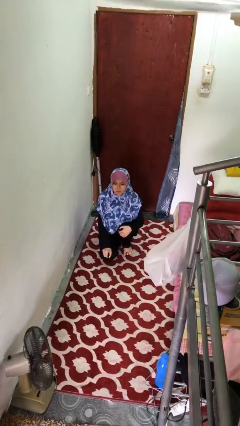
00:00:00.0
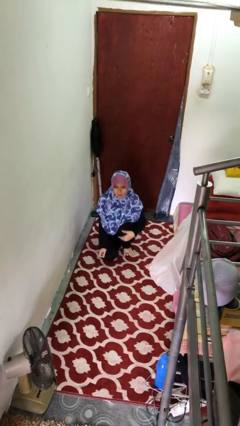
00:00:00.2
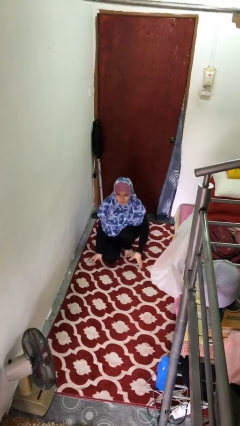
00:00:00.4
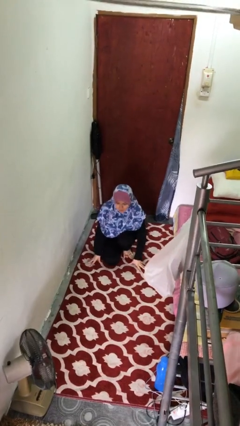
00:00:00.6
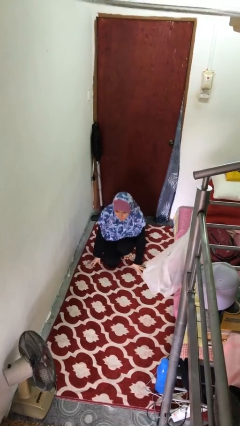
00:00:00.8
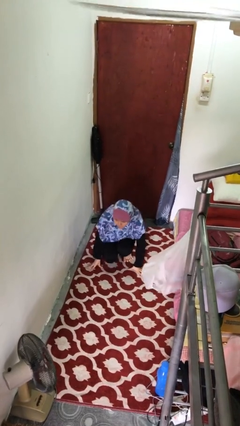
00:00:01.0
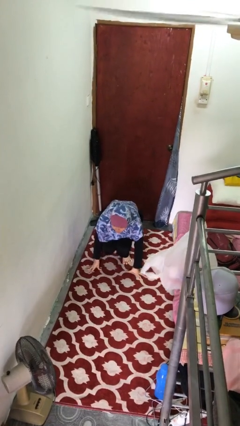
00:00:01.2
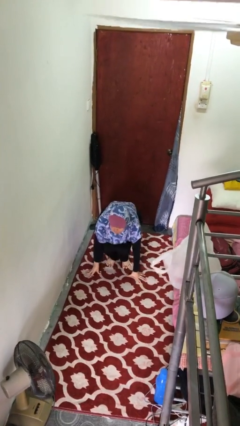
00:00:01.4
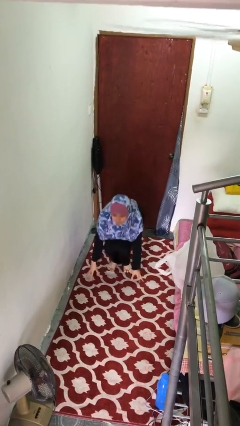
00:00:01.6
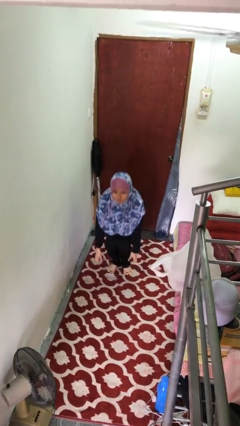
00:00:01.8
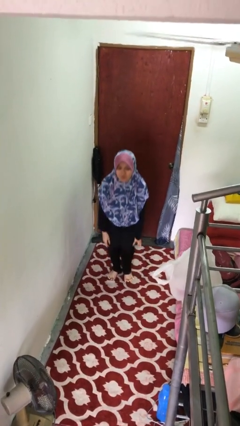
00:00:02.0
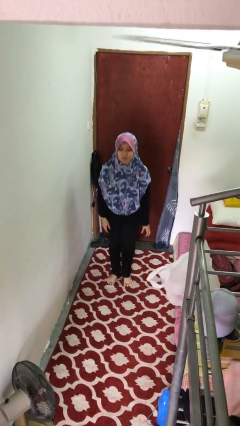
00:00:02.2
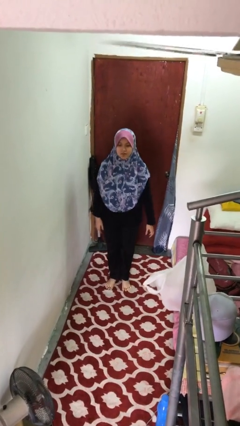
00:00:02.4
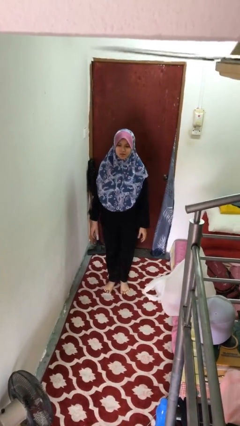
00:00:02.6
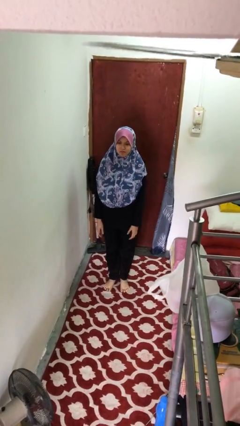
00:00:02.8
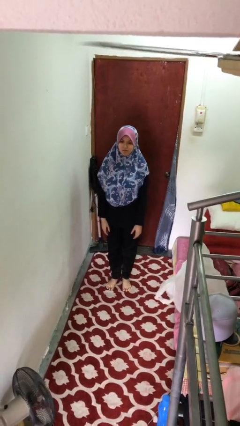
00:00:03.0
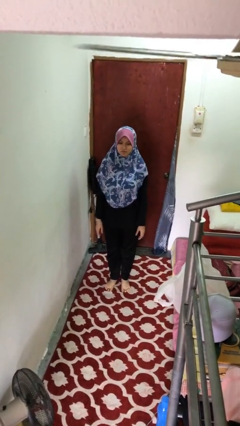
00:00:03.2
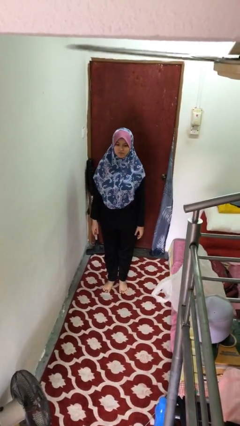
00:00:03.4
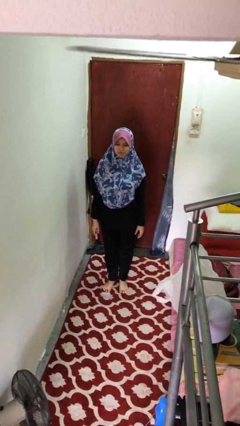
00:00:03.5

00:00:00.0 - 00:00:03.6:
person stands up from floor

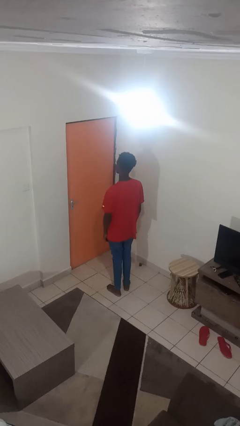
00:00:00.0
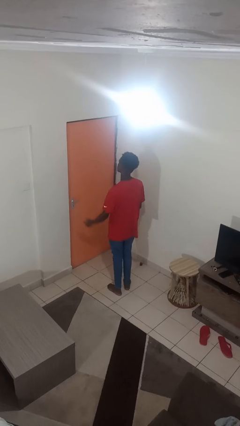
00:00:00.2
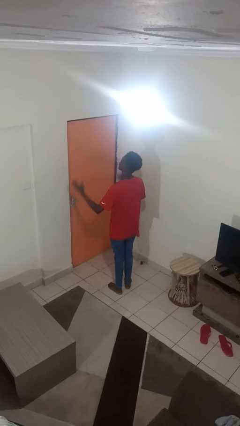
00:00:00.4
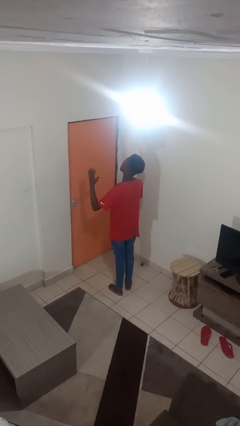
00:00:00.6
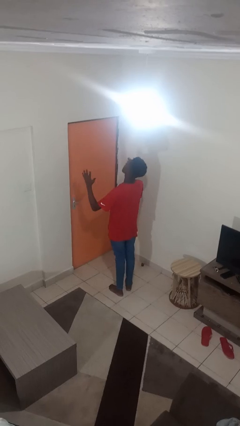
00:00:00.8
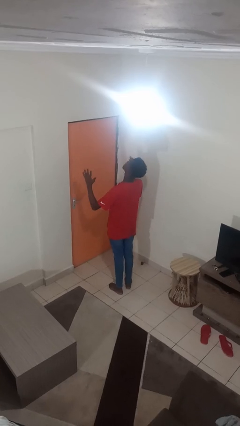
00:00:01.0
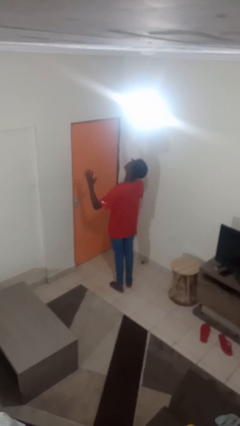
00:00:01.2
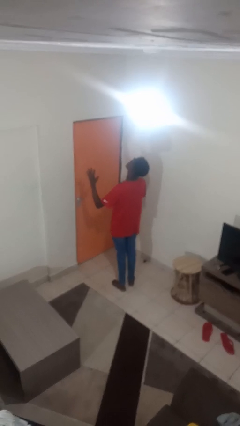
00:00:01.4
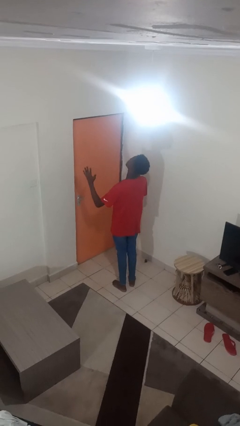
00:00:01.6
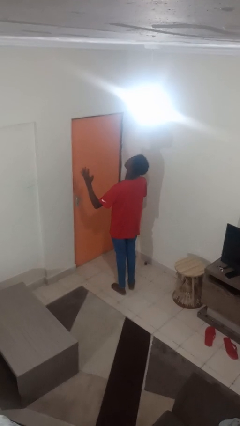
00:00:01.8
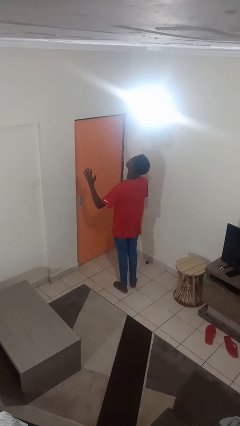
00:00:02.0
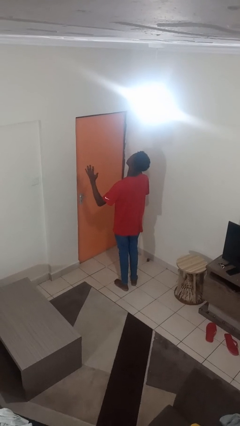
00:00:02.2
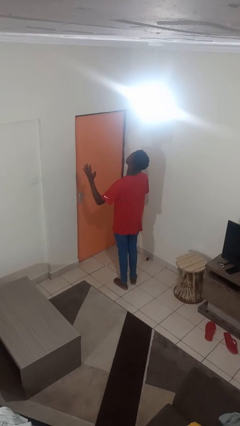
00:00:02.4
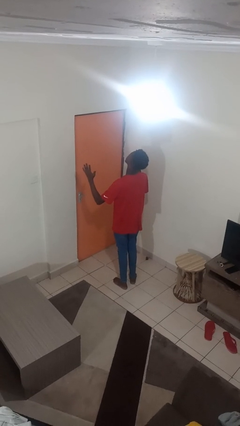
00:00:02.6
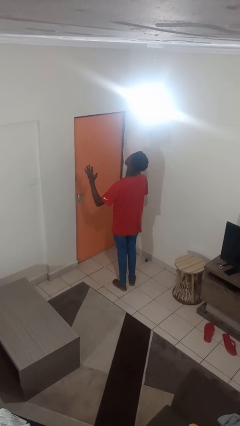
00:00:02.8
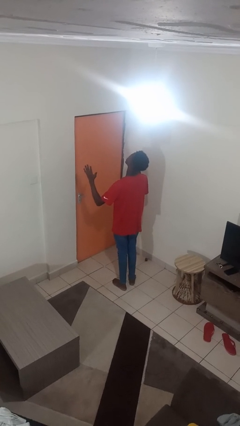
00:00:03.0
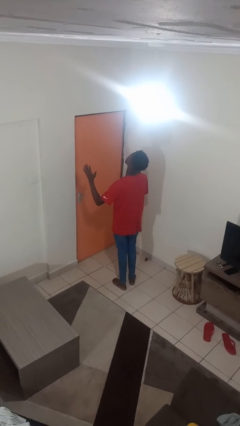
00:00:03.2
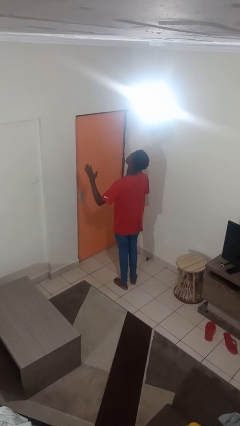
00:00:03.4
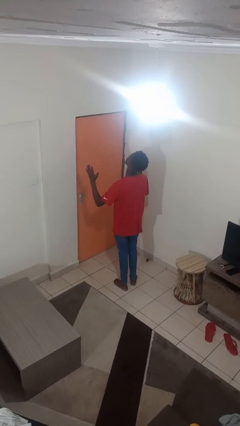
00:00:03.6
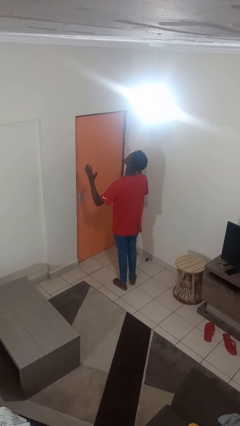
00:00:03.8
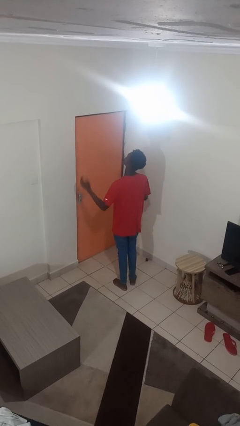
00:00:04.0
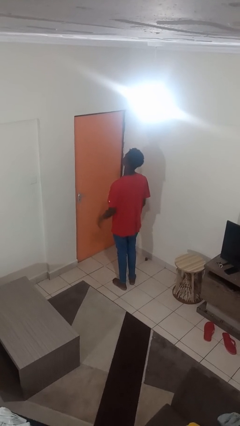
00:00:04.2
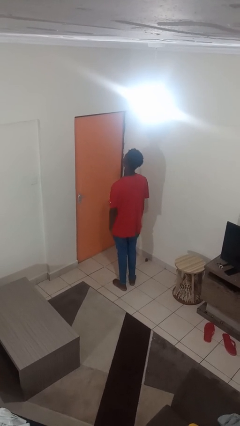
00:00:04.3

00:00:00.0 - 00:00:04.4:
person prays

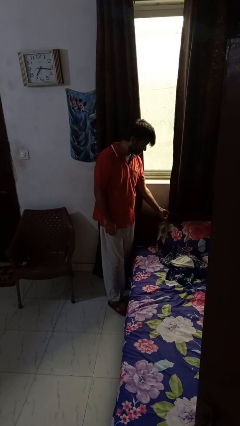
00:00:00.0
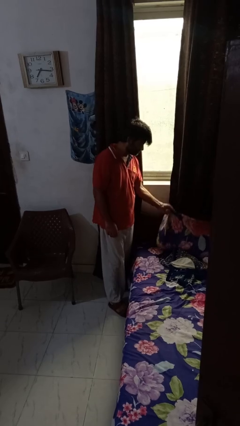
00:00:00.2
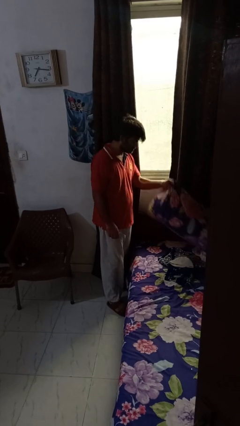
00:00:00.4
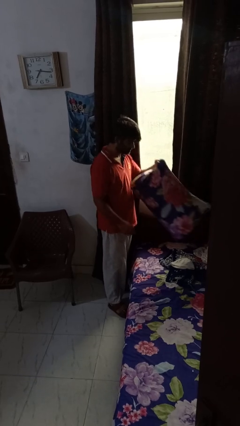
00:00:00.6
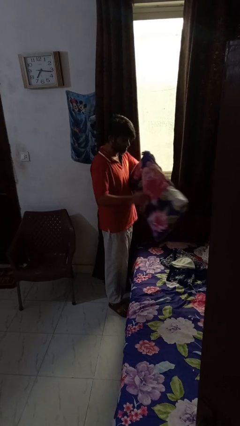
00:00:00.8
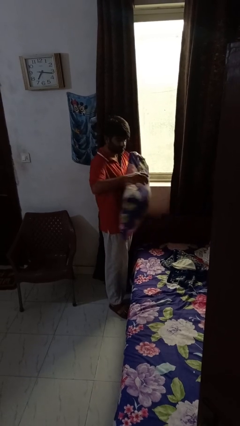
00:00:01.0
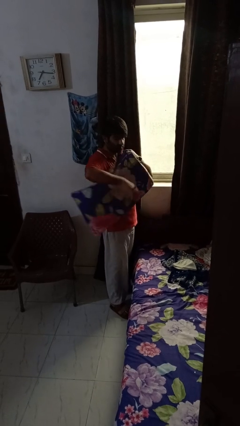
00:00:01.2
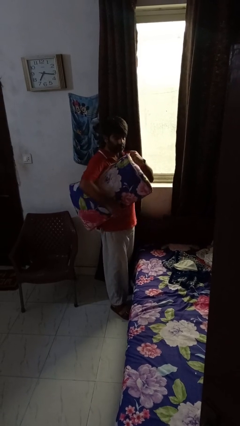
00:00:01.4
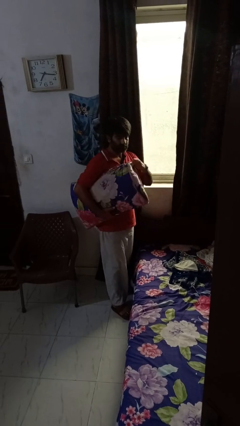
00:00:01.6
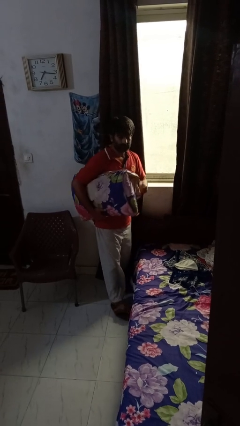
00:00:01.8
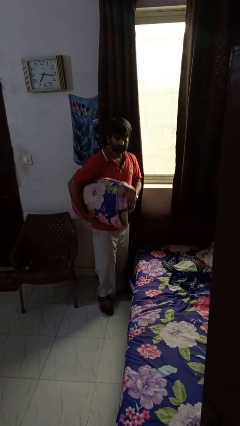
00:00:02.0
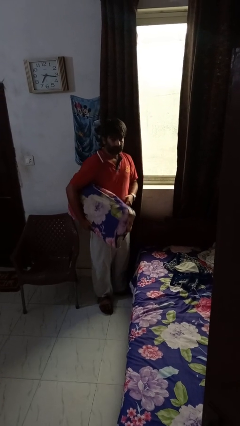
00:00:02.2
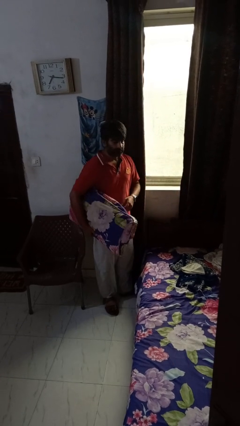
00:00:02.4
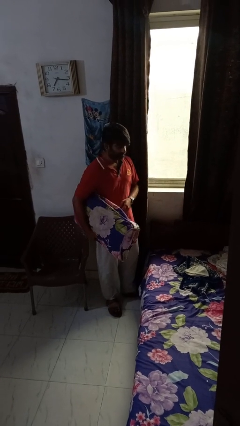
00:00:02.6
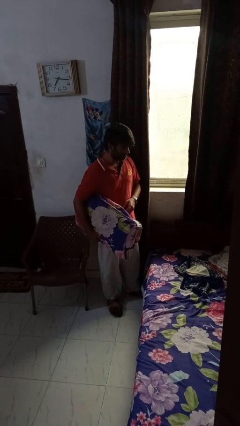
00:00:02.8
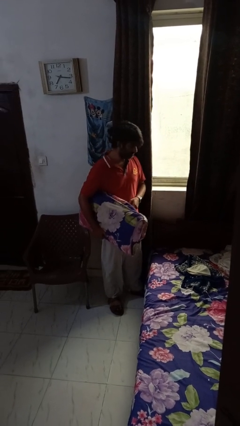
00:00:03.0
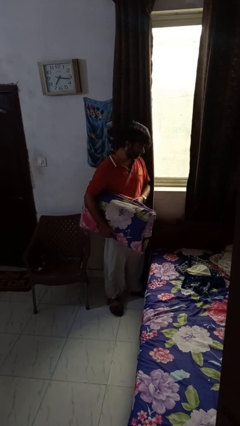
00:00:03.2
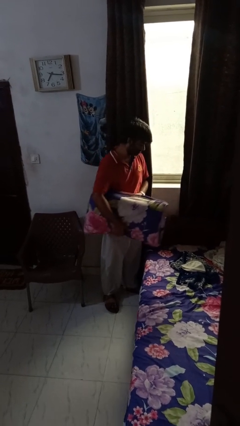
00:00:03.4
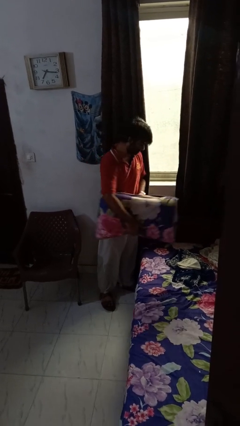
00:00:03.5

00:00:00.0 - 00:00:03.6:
person picks up object from bed

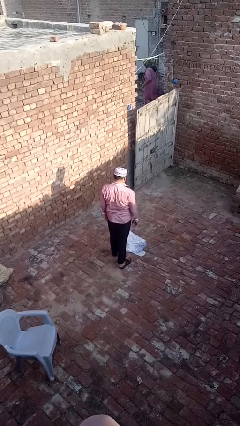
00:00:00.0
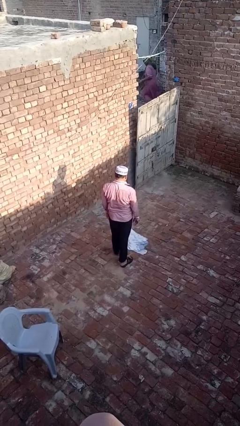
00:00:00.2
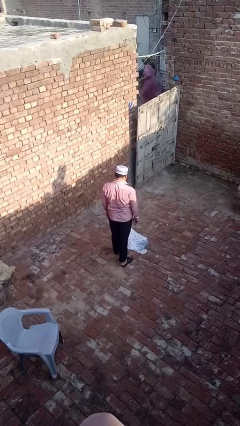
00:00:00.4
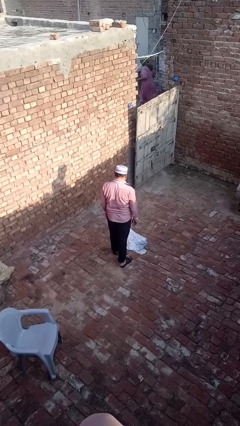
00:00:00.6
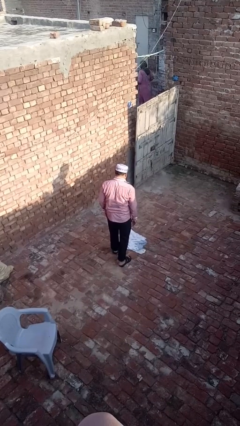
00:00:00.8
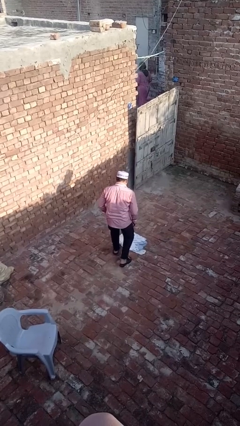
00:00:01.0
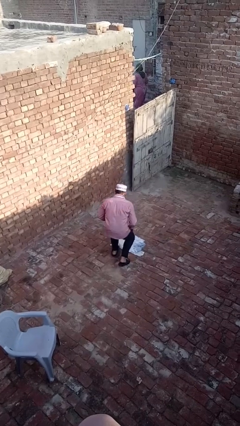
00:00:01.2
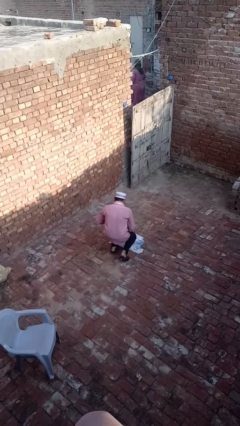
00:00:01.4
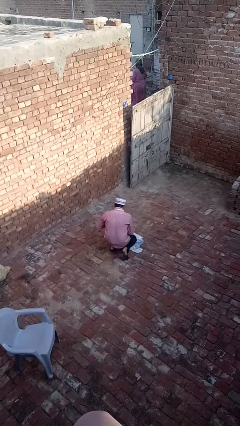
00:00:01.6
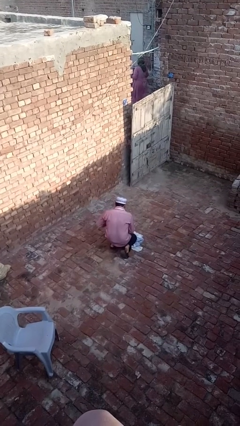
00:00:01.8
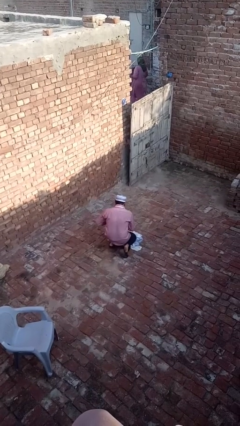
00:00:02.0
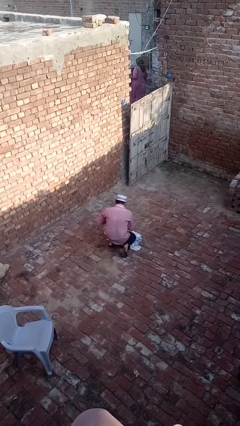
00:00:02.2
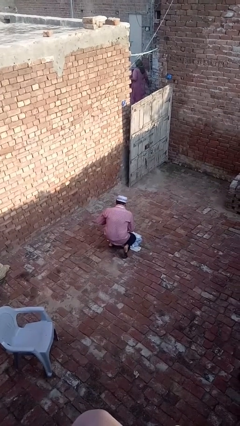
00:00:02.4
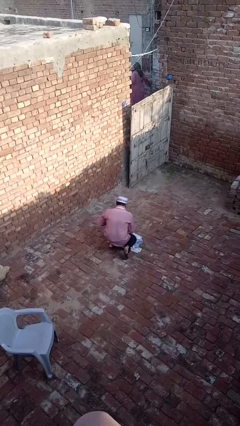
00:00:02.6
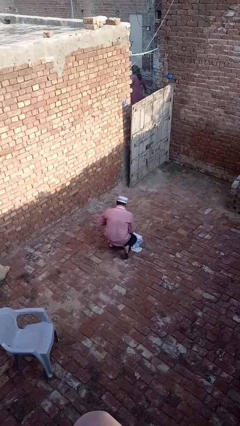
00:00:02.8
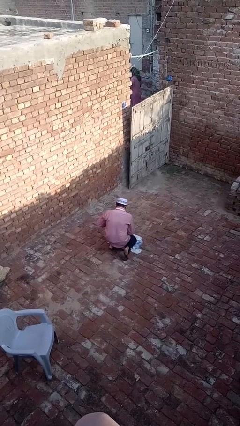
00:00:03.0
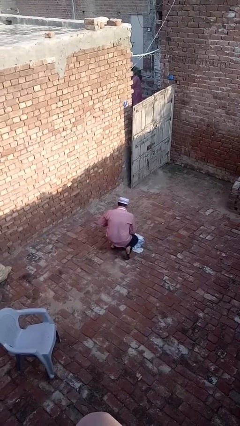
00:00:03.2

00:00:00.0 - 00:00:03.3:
person kneels

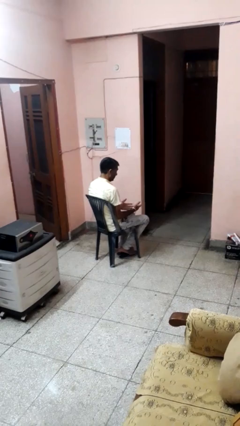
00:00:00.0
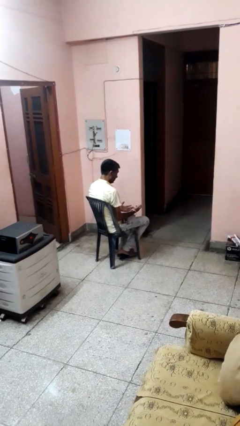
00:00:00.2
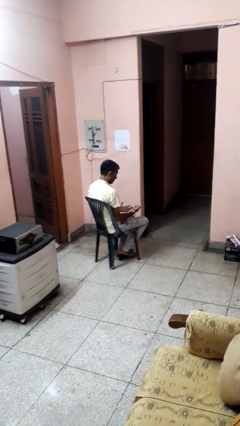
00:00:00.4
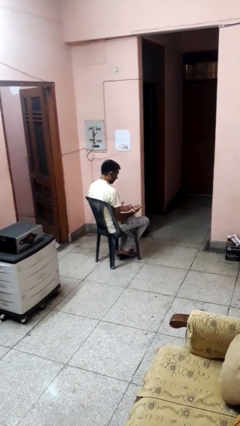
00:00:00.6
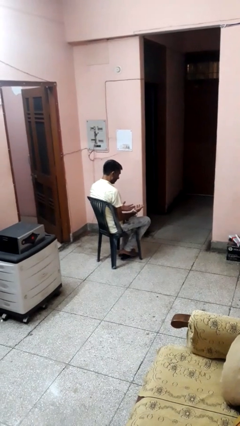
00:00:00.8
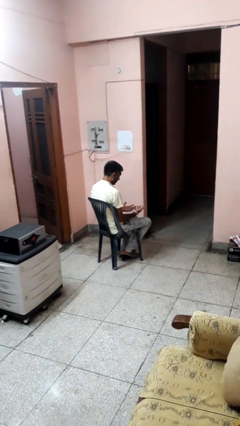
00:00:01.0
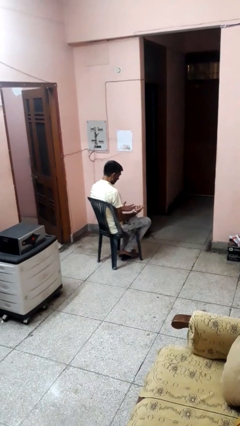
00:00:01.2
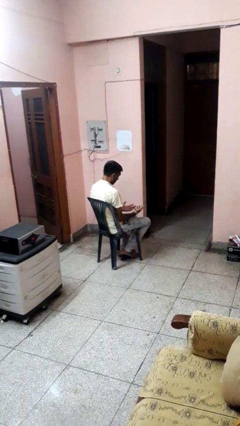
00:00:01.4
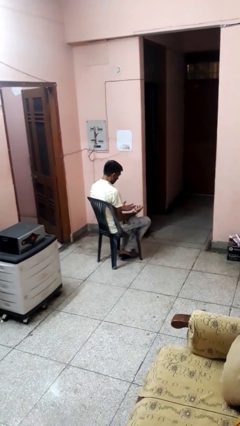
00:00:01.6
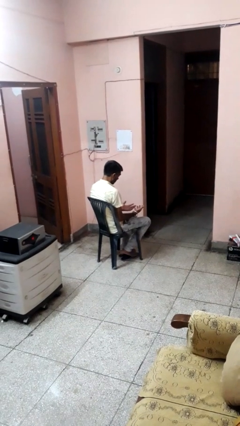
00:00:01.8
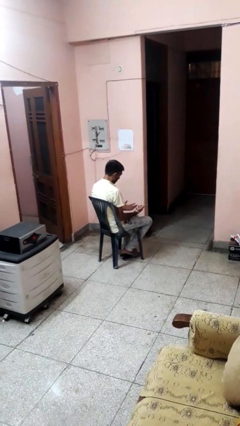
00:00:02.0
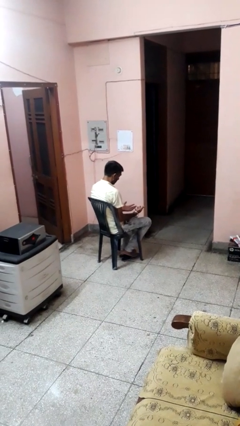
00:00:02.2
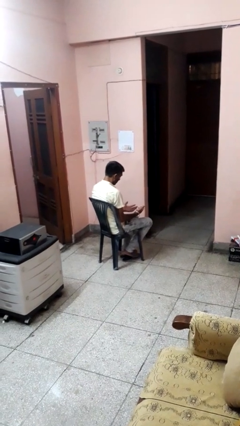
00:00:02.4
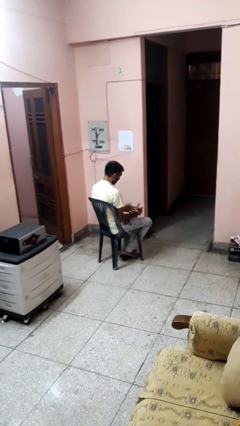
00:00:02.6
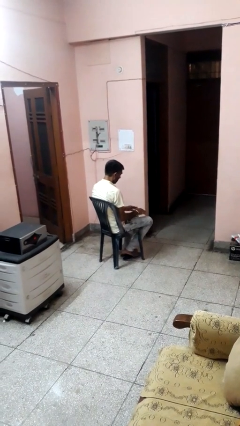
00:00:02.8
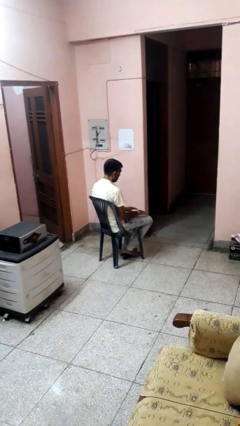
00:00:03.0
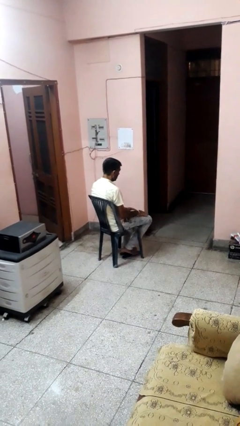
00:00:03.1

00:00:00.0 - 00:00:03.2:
person looks at hands in lap
